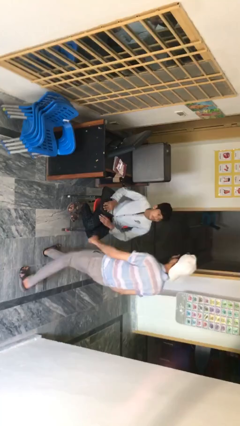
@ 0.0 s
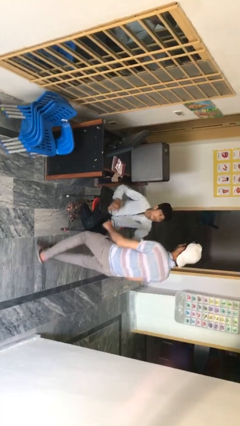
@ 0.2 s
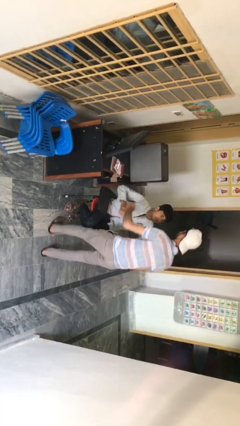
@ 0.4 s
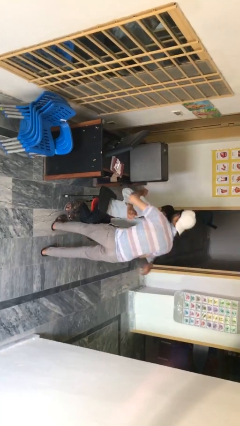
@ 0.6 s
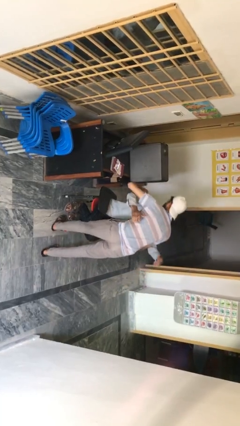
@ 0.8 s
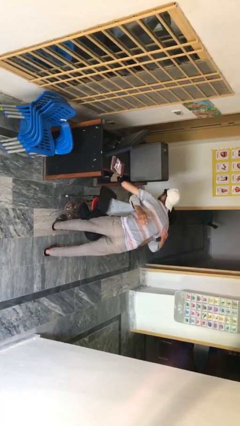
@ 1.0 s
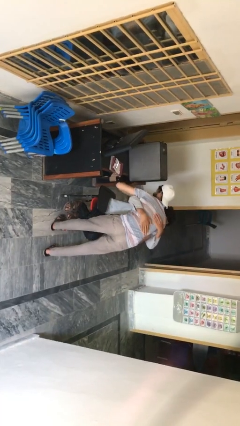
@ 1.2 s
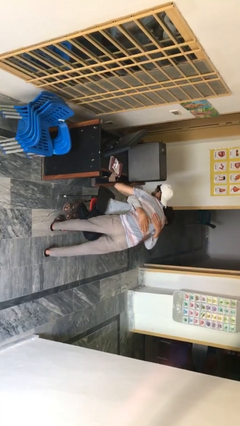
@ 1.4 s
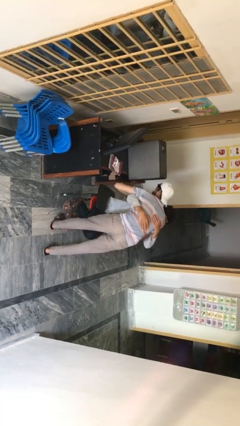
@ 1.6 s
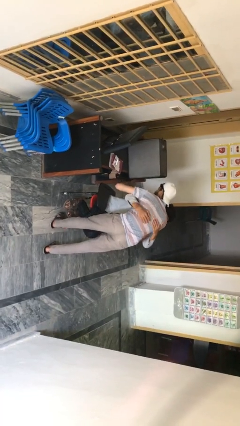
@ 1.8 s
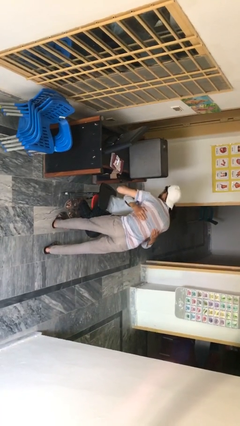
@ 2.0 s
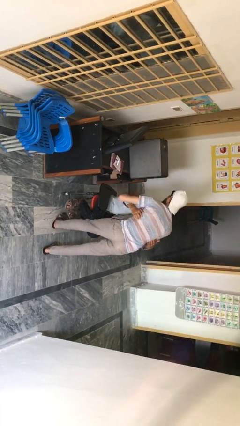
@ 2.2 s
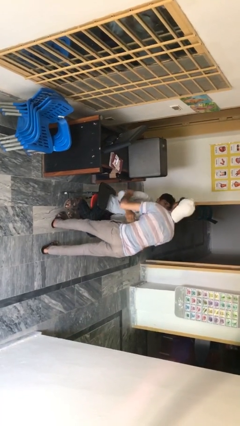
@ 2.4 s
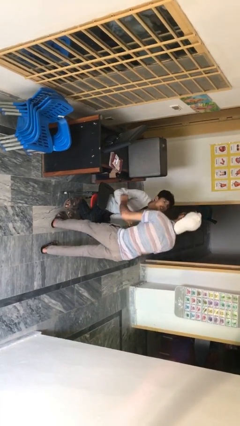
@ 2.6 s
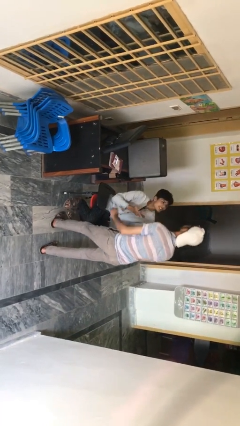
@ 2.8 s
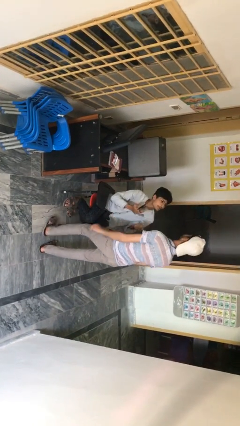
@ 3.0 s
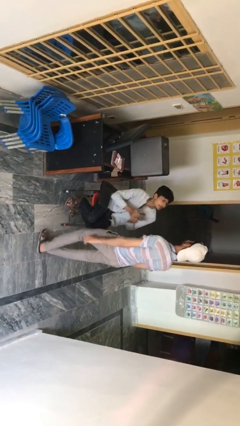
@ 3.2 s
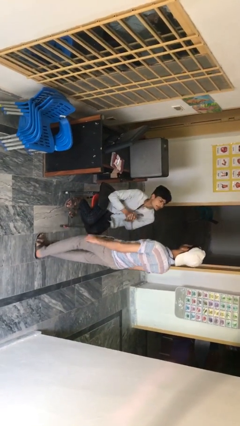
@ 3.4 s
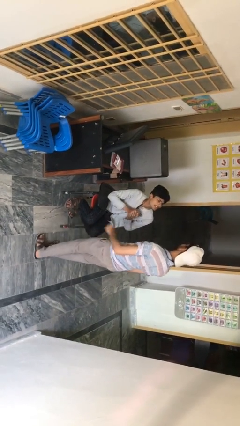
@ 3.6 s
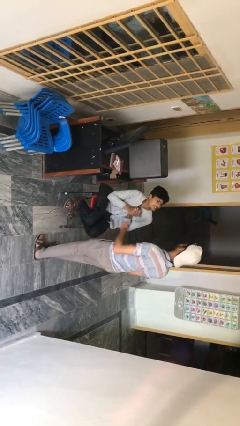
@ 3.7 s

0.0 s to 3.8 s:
person embraces person

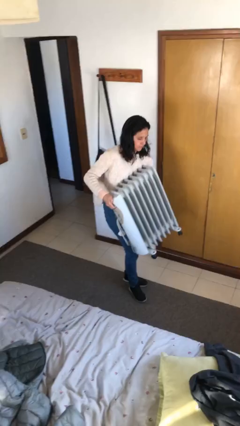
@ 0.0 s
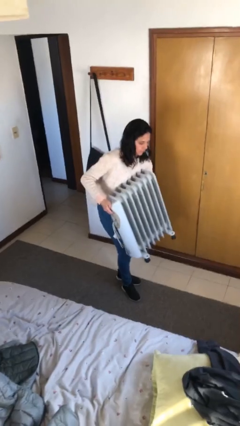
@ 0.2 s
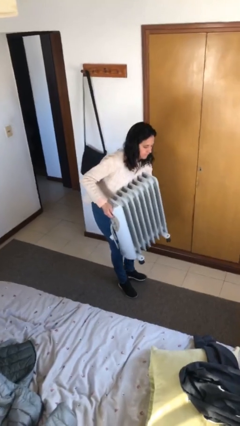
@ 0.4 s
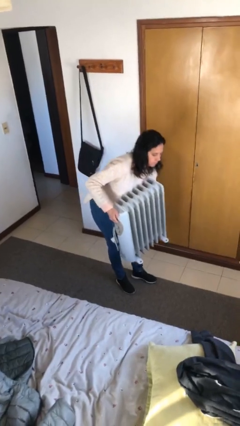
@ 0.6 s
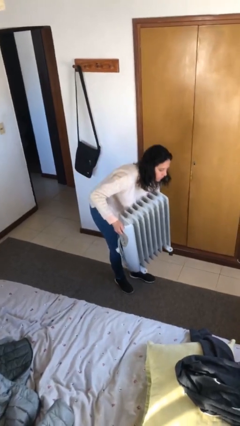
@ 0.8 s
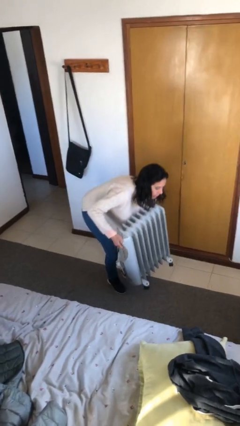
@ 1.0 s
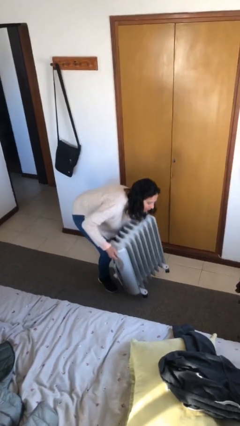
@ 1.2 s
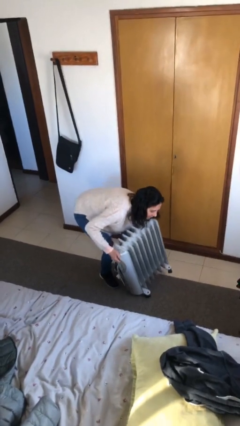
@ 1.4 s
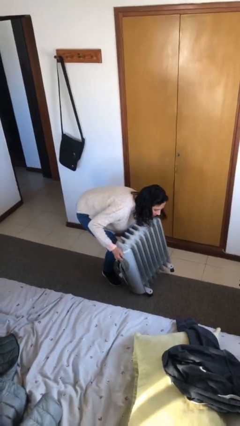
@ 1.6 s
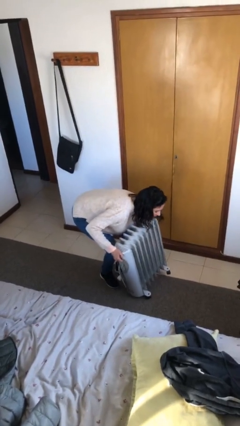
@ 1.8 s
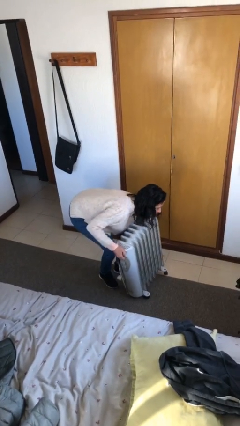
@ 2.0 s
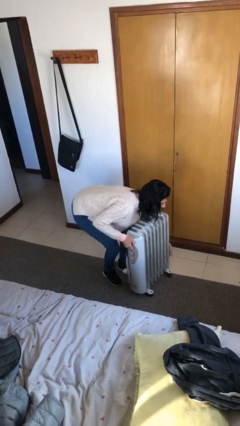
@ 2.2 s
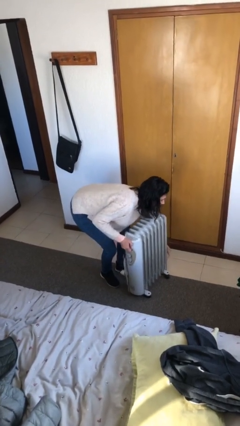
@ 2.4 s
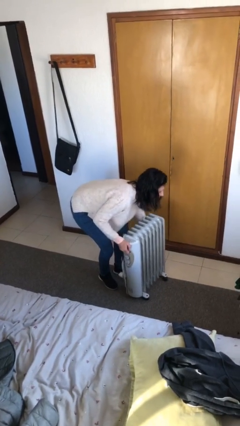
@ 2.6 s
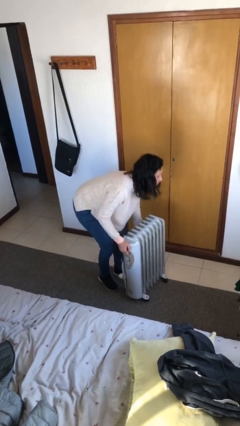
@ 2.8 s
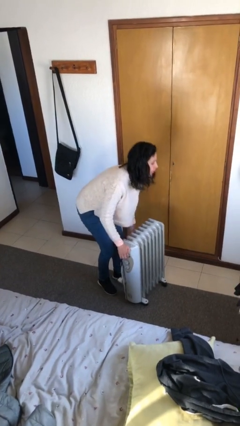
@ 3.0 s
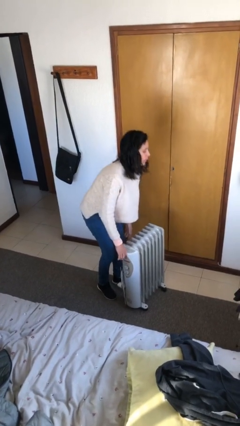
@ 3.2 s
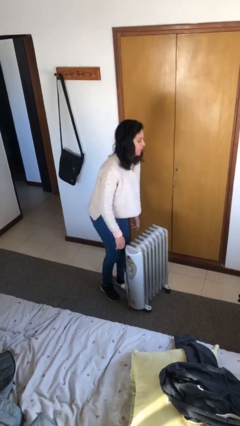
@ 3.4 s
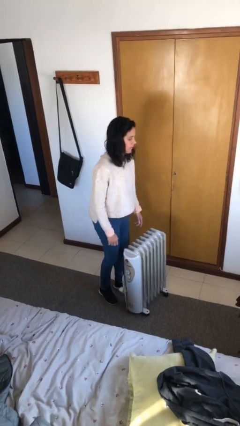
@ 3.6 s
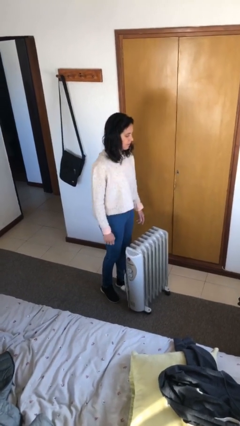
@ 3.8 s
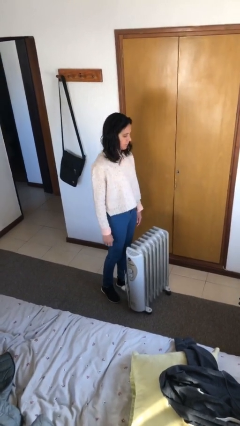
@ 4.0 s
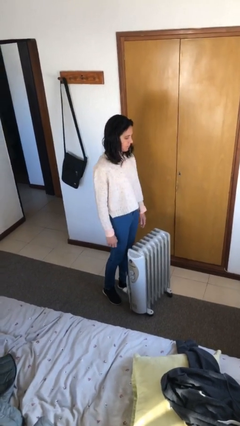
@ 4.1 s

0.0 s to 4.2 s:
person puts down object on floor

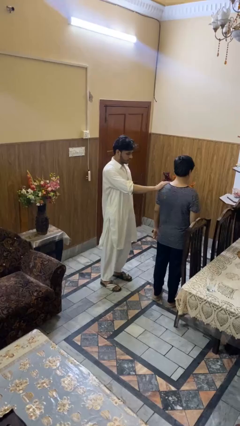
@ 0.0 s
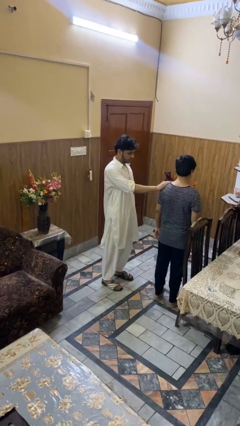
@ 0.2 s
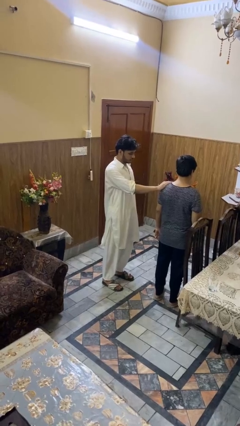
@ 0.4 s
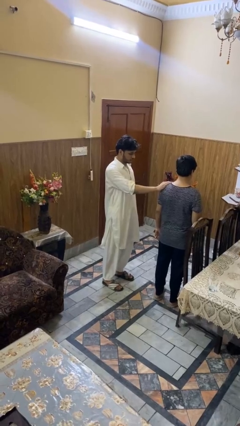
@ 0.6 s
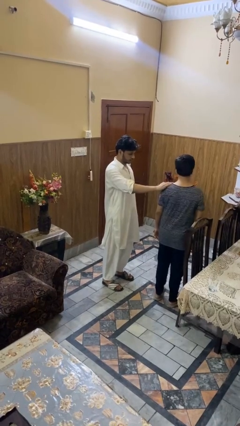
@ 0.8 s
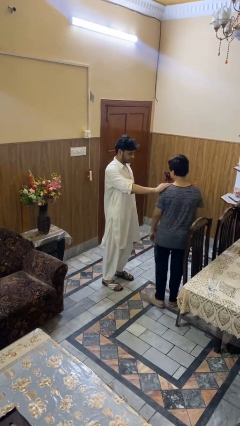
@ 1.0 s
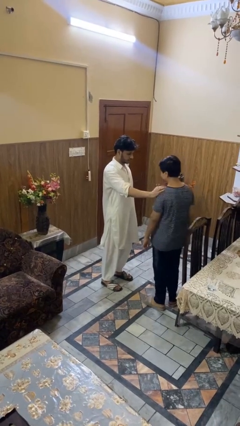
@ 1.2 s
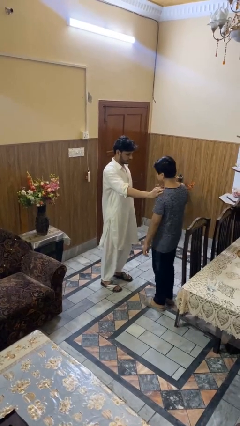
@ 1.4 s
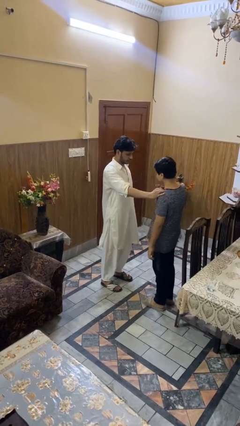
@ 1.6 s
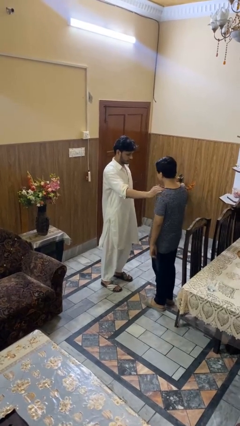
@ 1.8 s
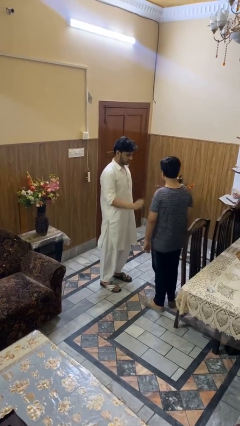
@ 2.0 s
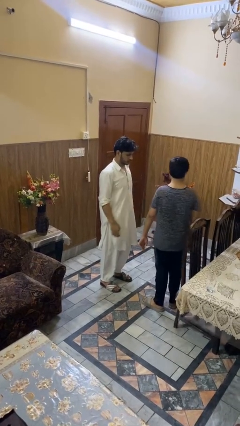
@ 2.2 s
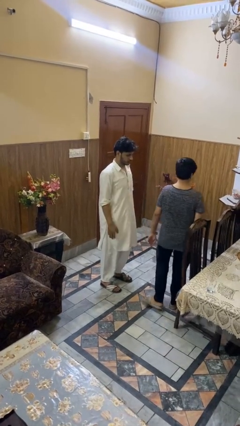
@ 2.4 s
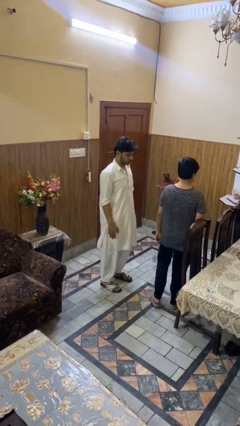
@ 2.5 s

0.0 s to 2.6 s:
person spins person around

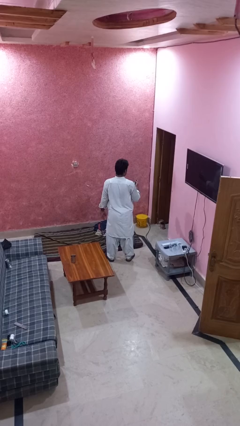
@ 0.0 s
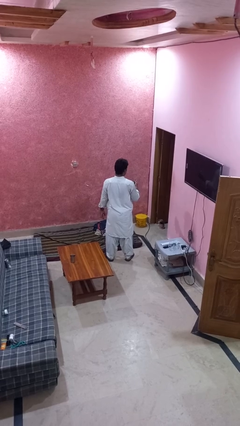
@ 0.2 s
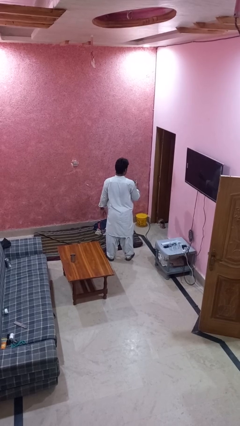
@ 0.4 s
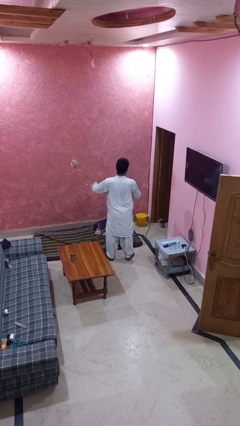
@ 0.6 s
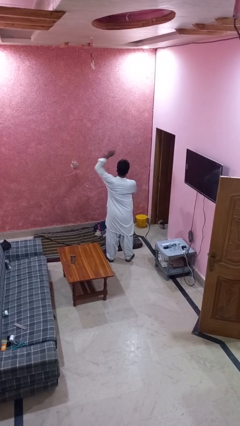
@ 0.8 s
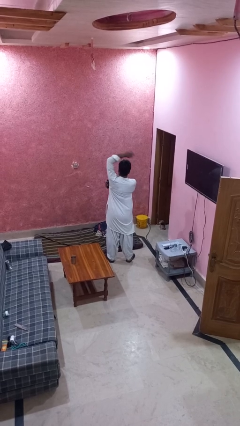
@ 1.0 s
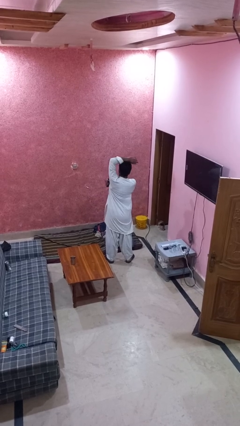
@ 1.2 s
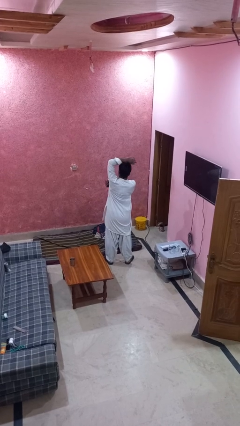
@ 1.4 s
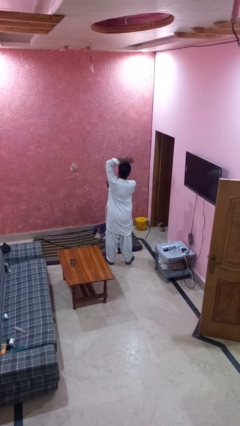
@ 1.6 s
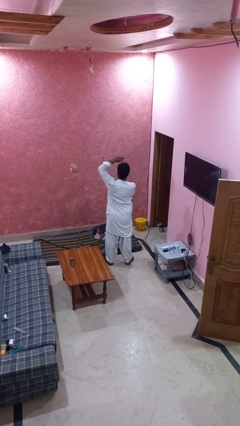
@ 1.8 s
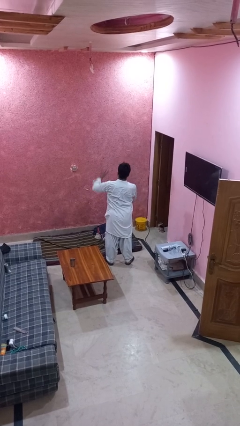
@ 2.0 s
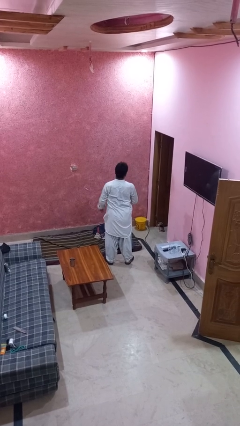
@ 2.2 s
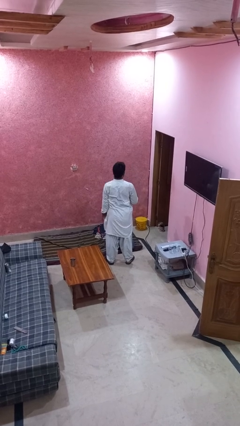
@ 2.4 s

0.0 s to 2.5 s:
person applies deodorant

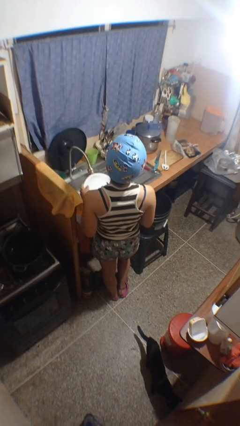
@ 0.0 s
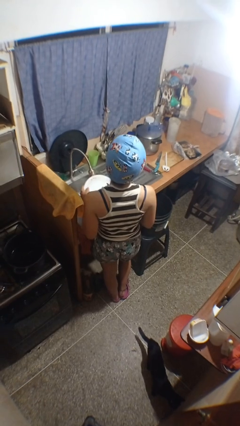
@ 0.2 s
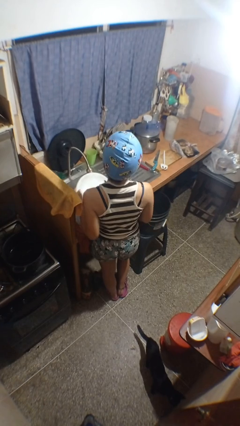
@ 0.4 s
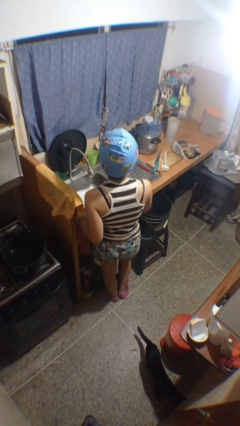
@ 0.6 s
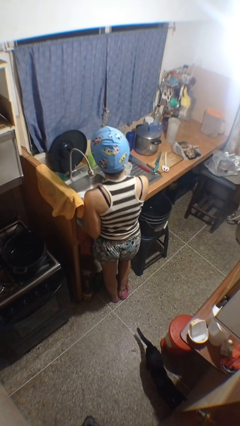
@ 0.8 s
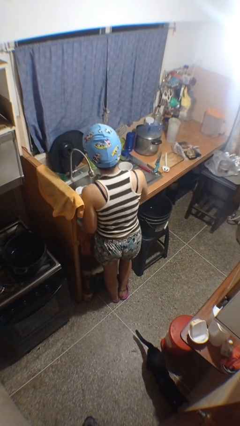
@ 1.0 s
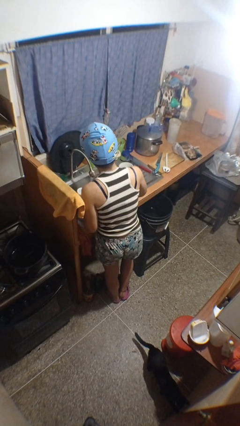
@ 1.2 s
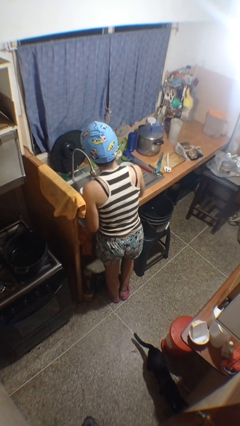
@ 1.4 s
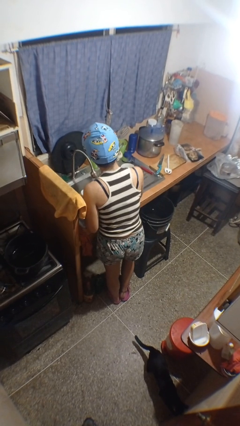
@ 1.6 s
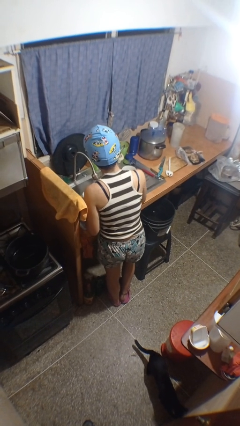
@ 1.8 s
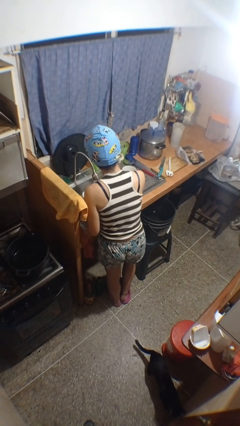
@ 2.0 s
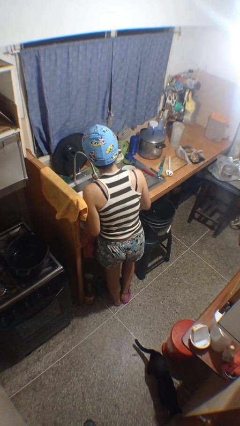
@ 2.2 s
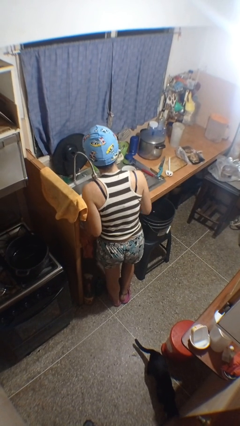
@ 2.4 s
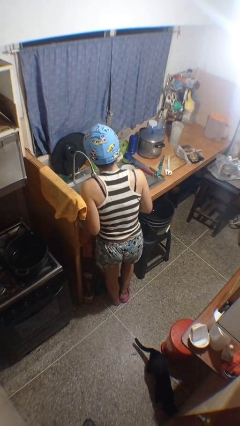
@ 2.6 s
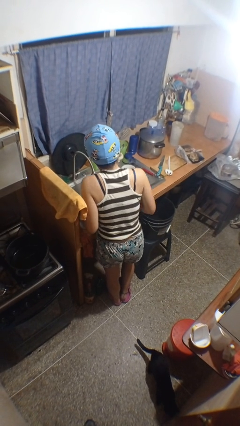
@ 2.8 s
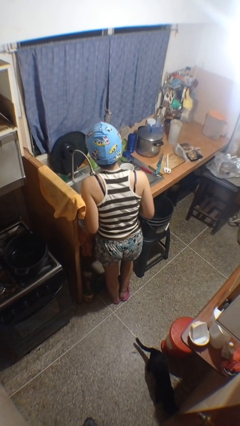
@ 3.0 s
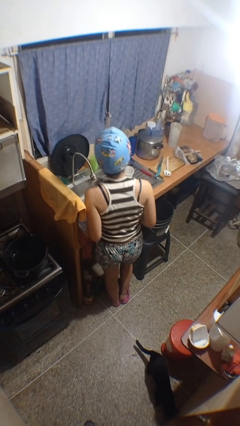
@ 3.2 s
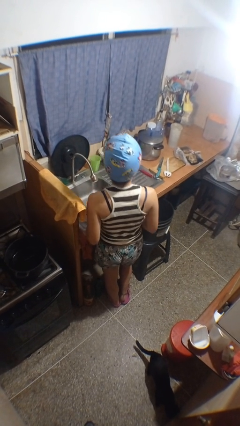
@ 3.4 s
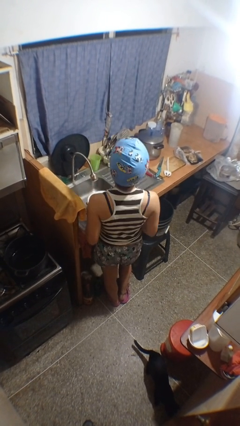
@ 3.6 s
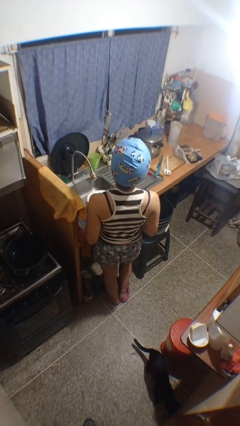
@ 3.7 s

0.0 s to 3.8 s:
person washes dish

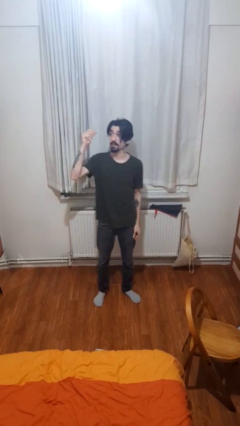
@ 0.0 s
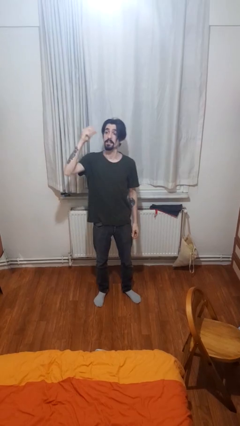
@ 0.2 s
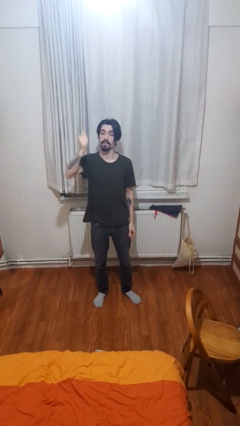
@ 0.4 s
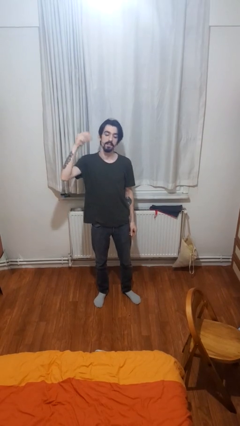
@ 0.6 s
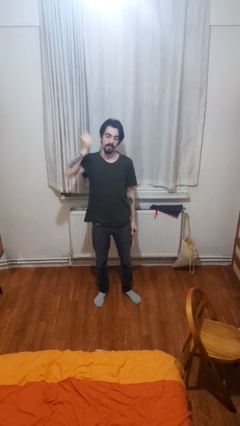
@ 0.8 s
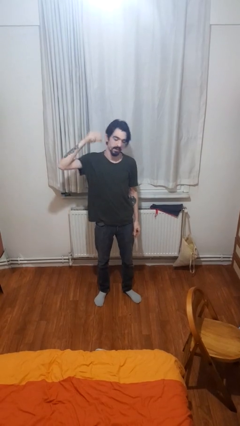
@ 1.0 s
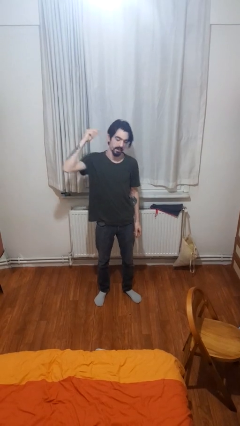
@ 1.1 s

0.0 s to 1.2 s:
person snaps fingers
